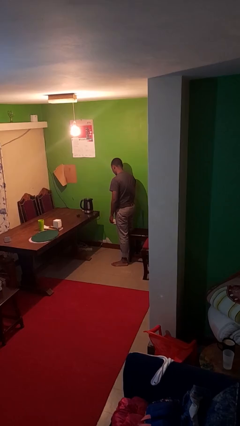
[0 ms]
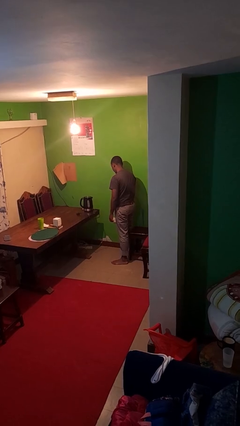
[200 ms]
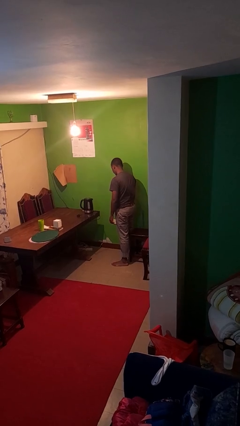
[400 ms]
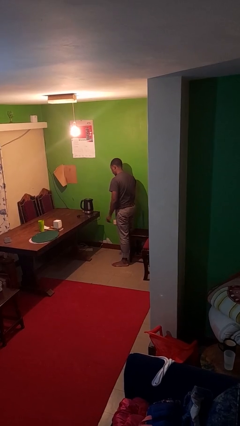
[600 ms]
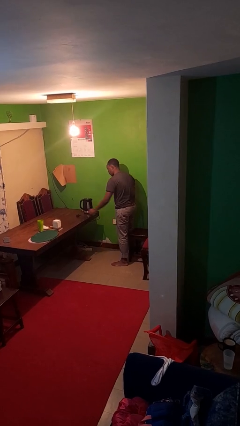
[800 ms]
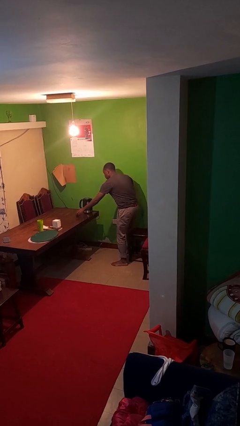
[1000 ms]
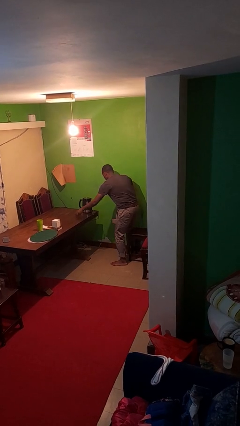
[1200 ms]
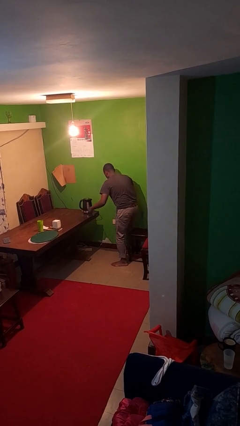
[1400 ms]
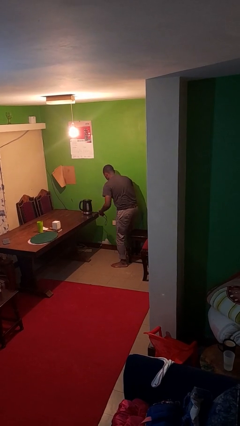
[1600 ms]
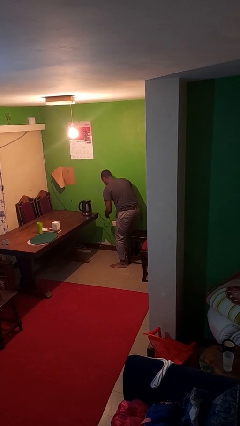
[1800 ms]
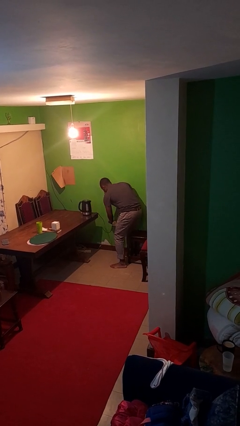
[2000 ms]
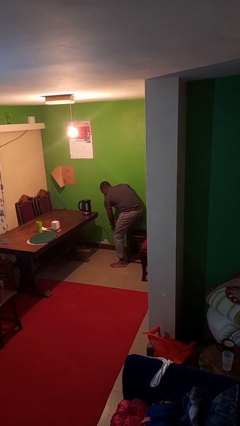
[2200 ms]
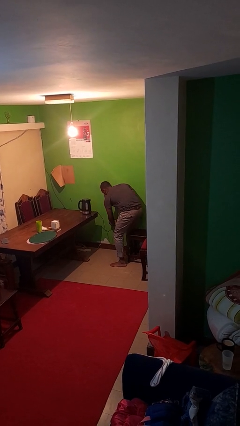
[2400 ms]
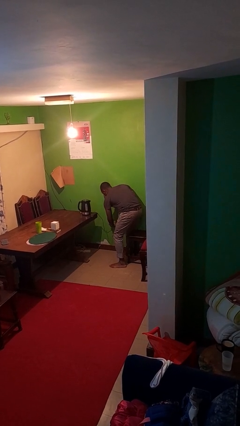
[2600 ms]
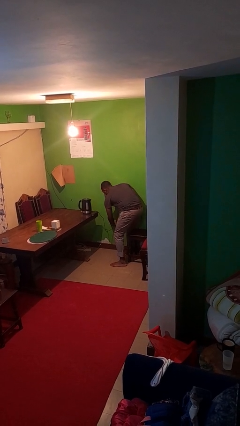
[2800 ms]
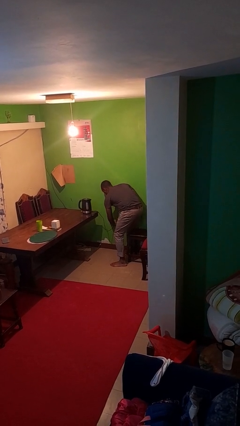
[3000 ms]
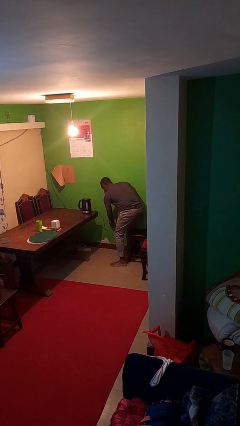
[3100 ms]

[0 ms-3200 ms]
person plugs into electrical socket

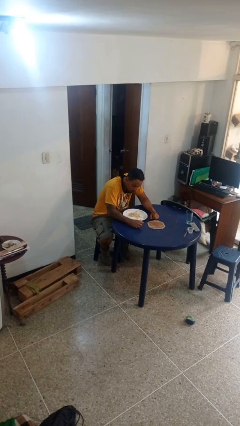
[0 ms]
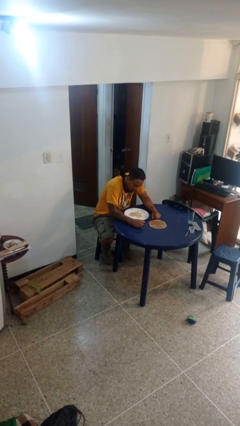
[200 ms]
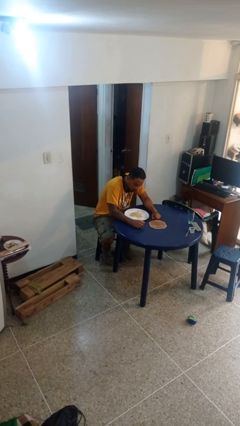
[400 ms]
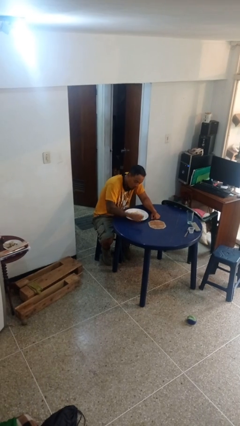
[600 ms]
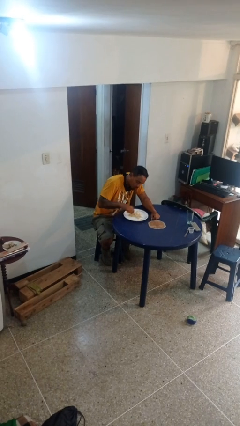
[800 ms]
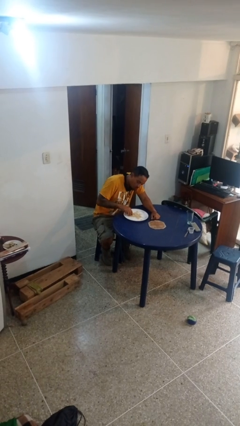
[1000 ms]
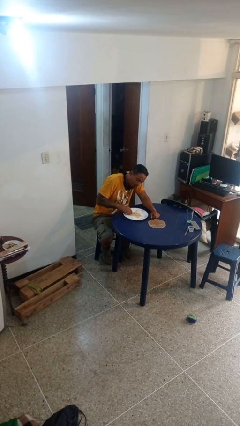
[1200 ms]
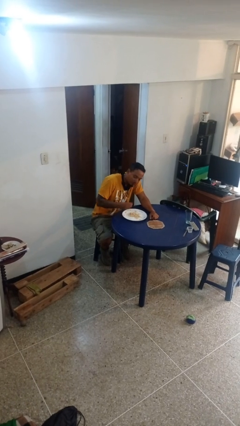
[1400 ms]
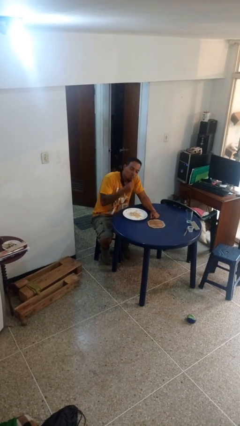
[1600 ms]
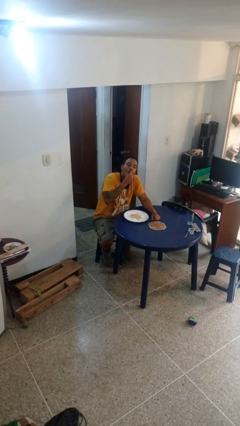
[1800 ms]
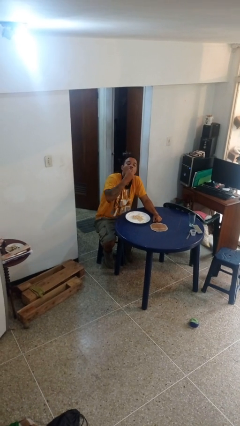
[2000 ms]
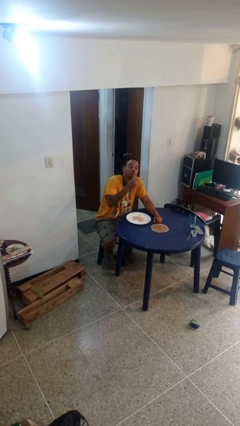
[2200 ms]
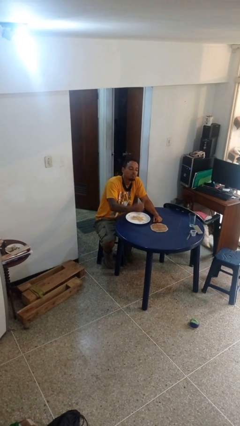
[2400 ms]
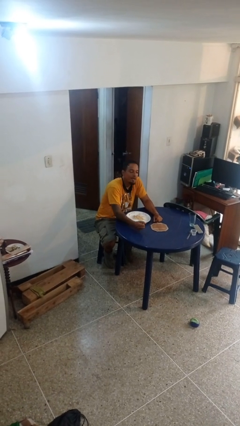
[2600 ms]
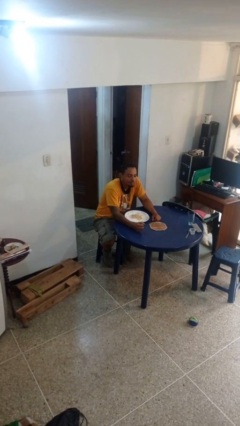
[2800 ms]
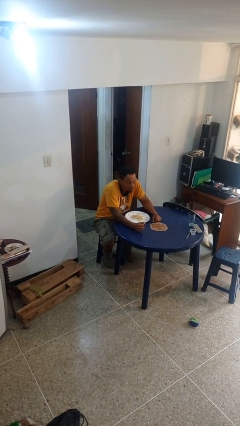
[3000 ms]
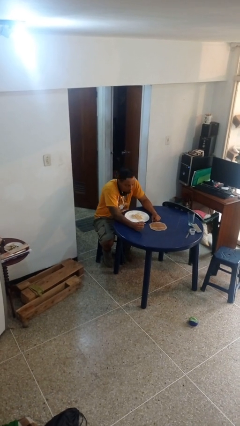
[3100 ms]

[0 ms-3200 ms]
person eats with hands

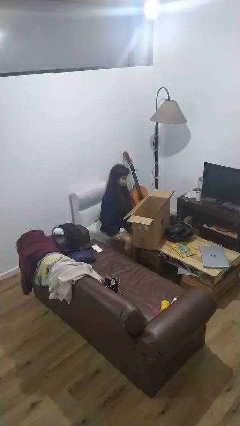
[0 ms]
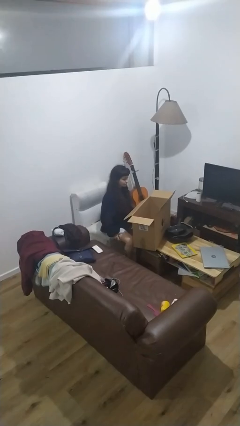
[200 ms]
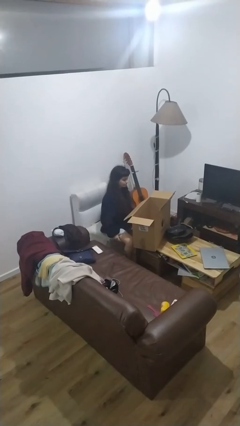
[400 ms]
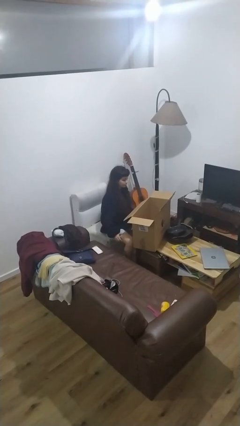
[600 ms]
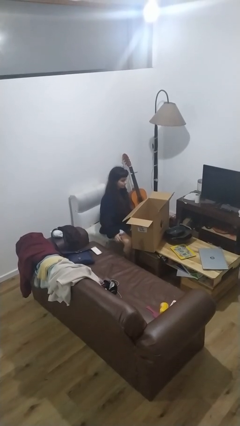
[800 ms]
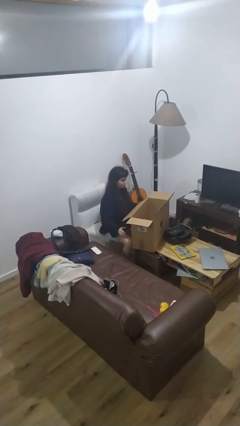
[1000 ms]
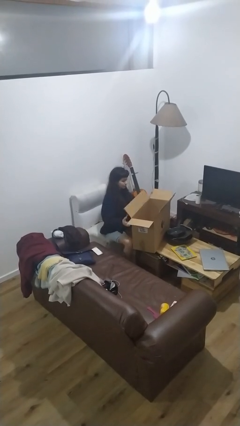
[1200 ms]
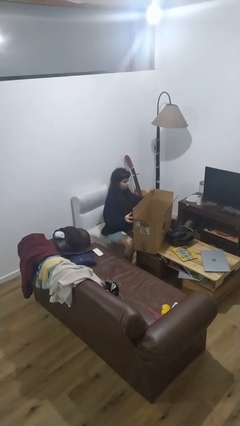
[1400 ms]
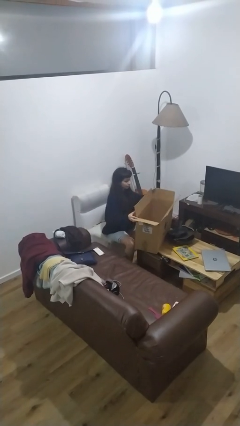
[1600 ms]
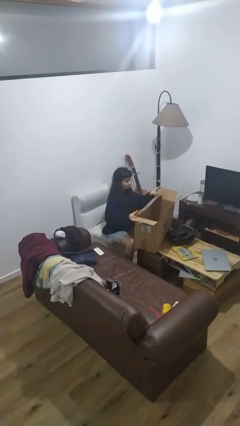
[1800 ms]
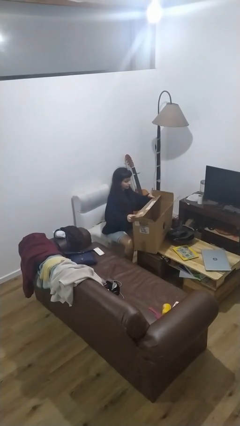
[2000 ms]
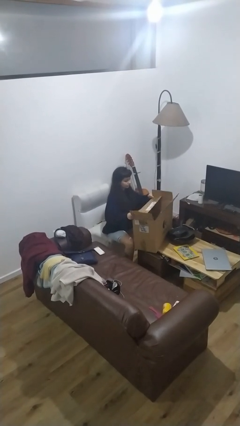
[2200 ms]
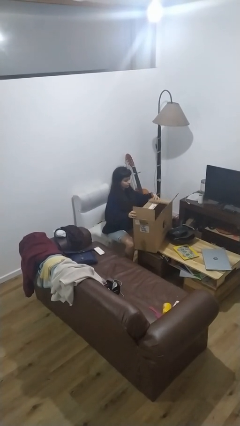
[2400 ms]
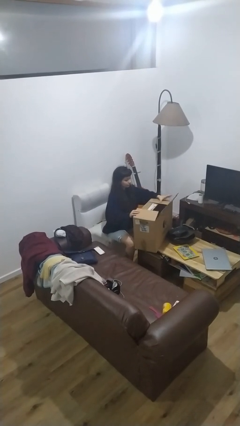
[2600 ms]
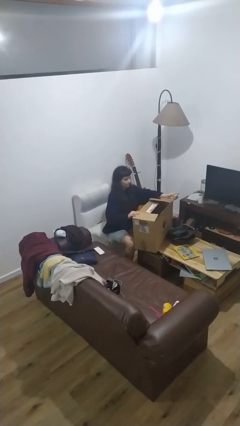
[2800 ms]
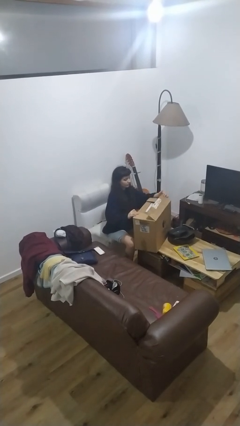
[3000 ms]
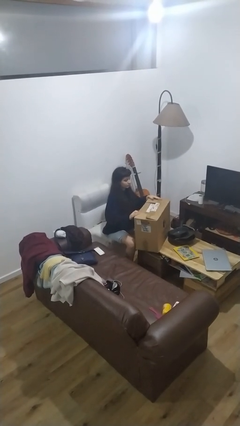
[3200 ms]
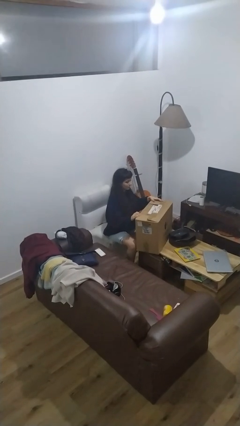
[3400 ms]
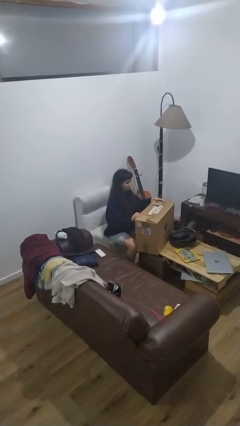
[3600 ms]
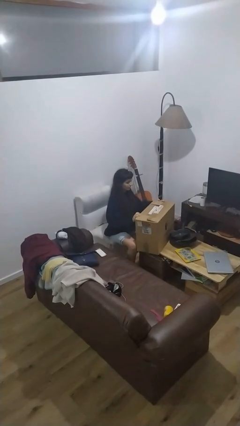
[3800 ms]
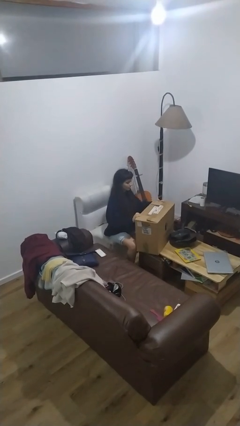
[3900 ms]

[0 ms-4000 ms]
person closes box

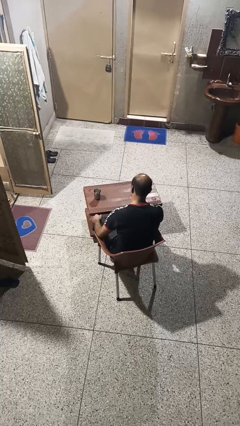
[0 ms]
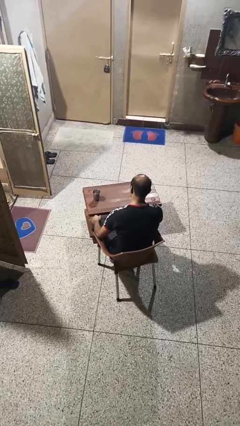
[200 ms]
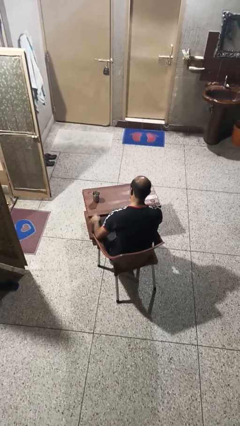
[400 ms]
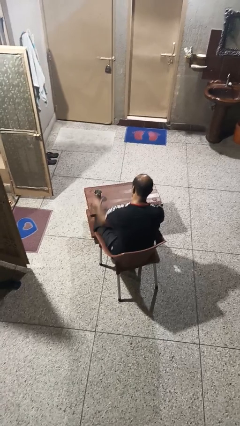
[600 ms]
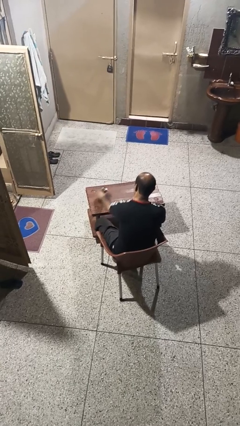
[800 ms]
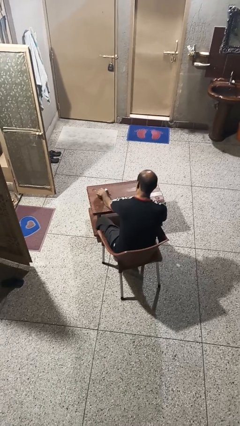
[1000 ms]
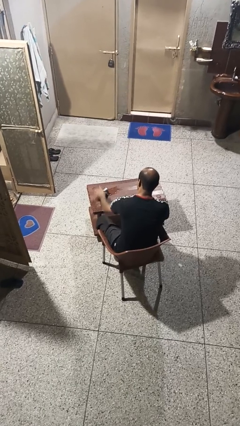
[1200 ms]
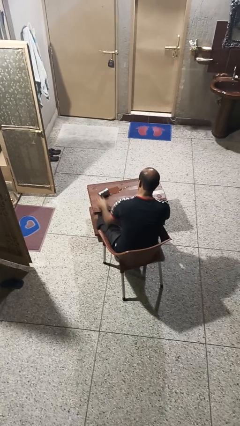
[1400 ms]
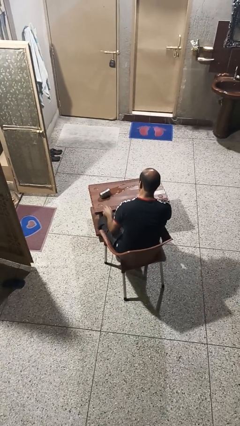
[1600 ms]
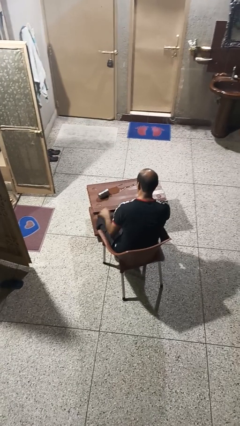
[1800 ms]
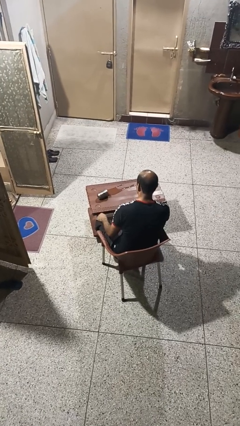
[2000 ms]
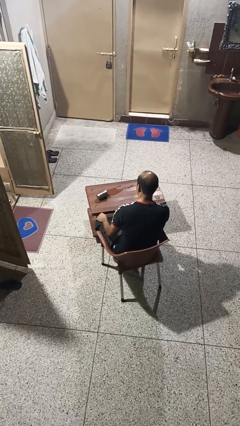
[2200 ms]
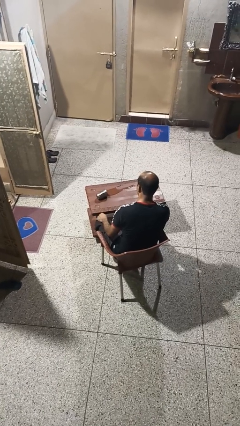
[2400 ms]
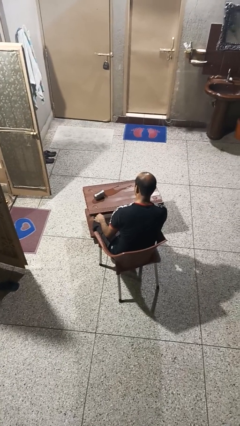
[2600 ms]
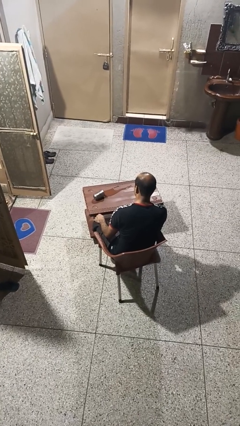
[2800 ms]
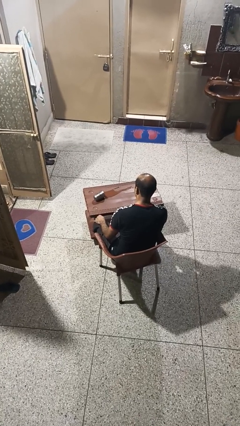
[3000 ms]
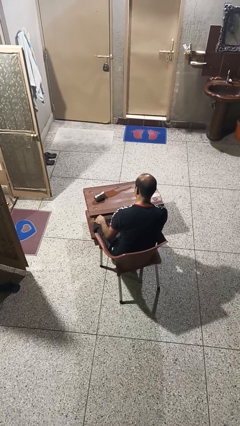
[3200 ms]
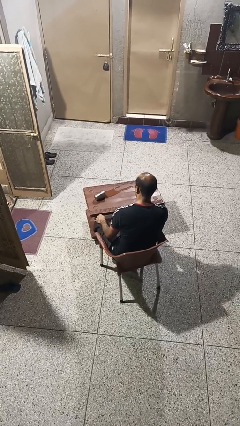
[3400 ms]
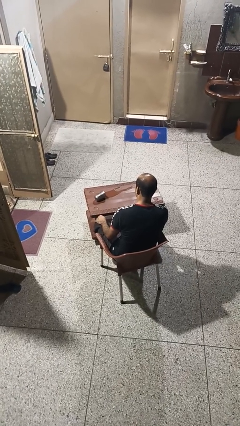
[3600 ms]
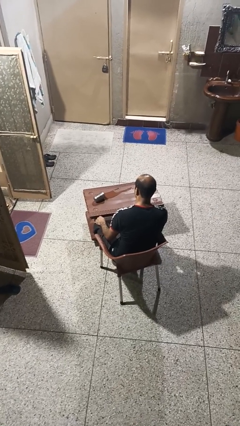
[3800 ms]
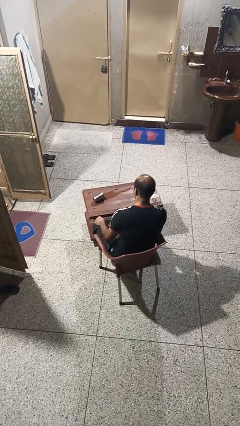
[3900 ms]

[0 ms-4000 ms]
person spills on table

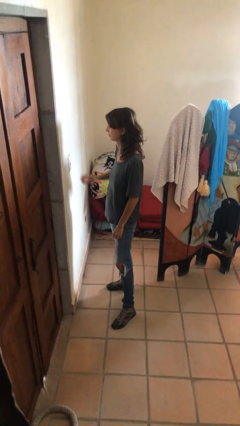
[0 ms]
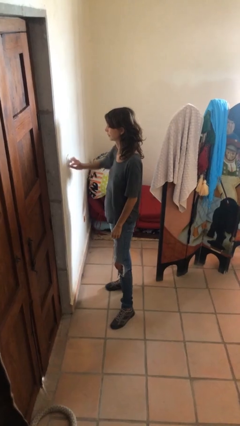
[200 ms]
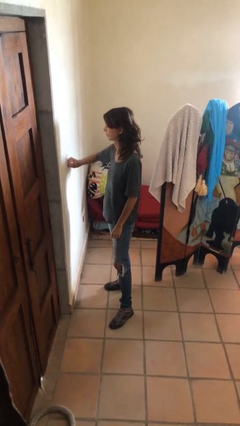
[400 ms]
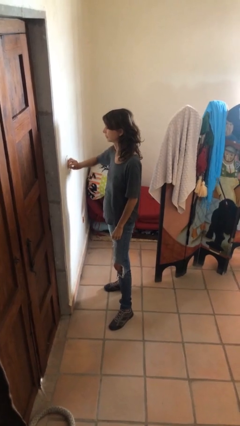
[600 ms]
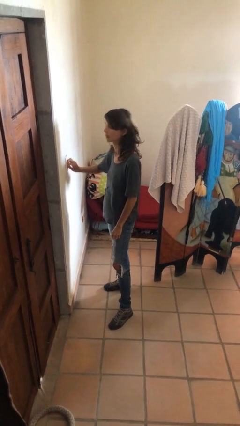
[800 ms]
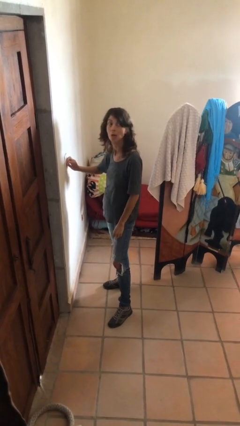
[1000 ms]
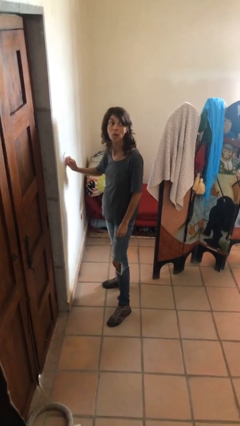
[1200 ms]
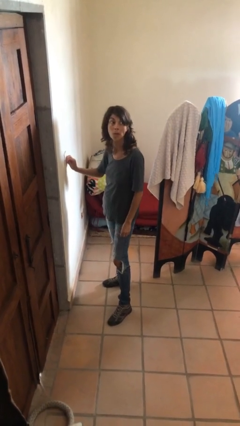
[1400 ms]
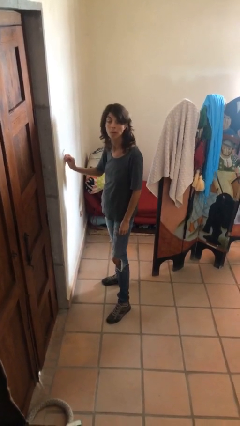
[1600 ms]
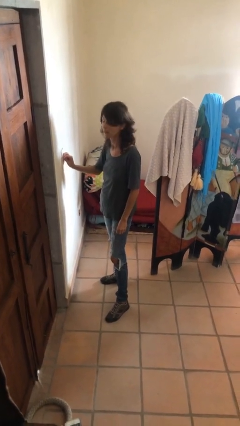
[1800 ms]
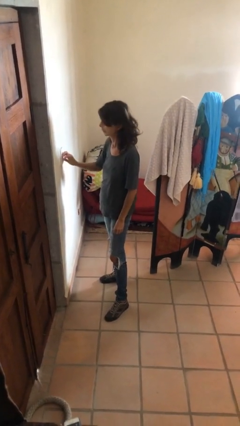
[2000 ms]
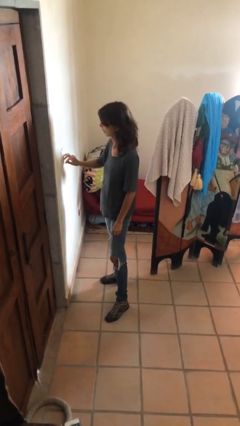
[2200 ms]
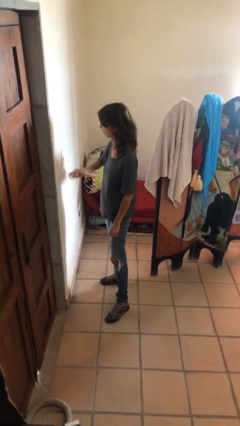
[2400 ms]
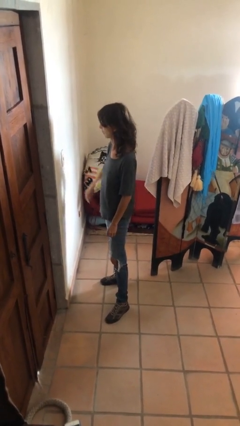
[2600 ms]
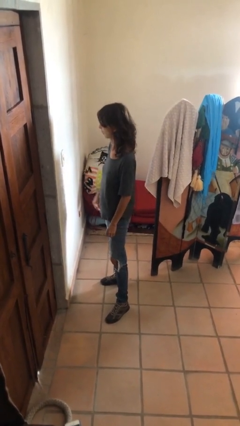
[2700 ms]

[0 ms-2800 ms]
person adjusts thermostat

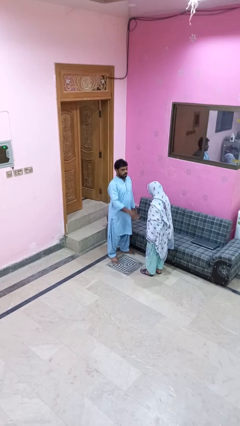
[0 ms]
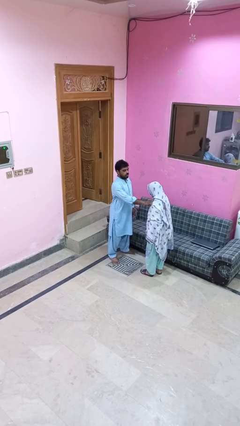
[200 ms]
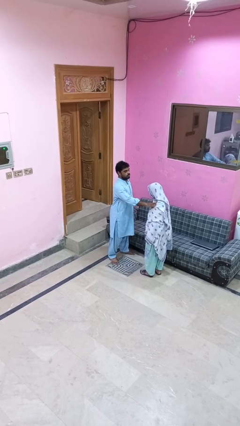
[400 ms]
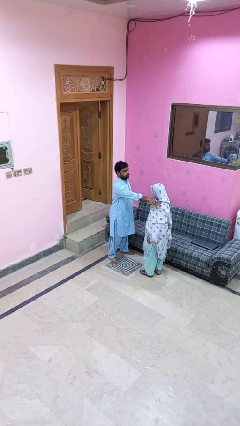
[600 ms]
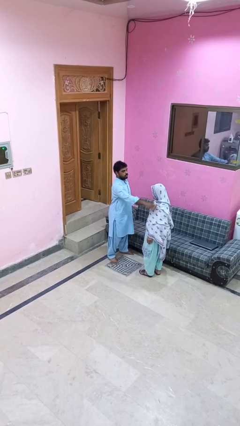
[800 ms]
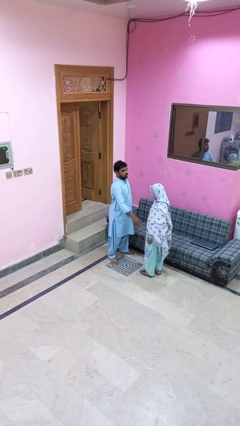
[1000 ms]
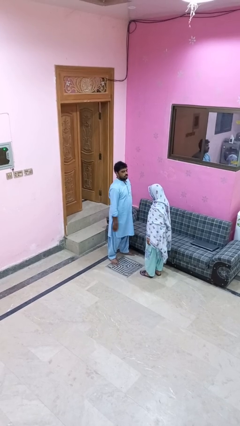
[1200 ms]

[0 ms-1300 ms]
person shoves person
